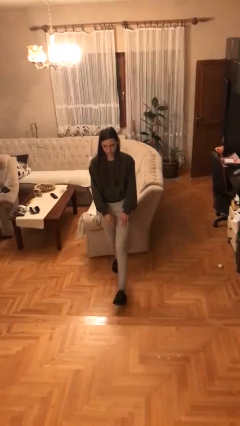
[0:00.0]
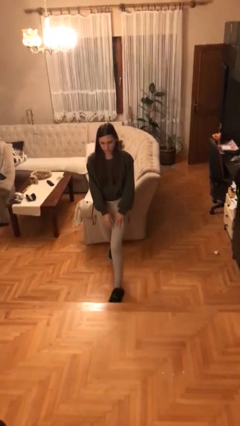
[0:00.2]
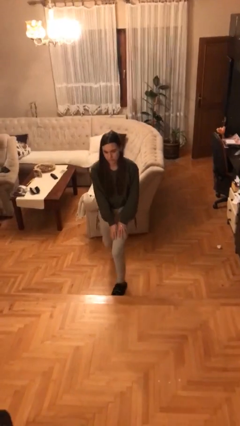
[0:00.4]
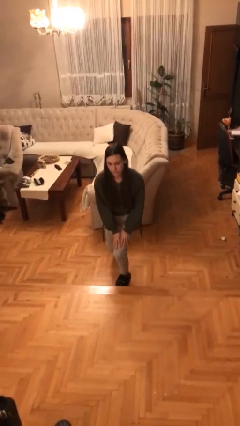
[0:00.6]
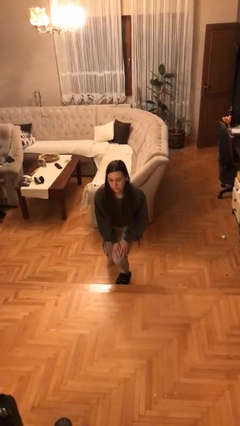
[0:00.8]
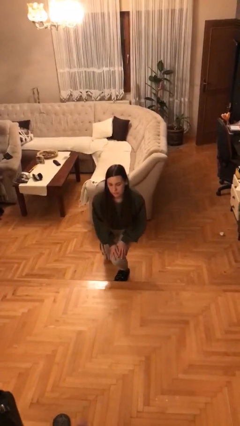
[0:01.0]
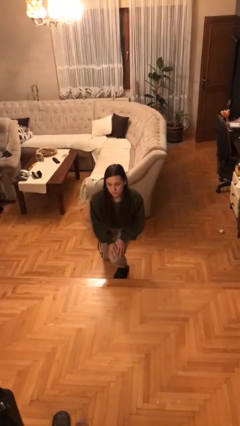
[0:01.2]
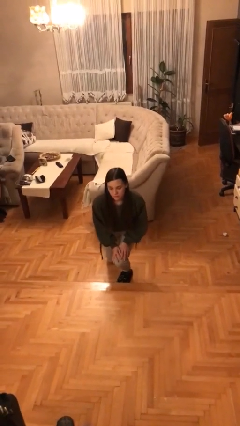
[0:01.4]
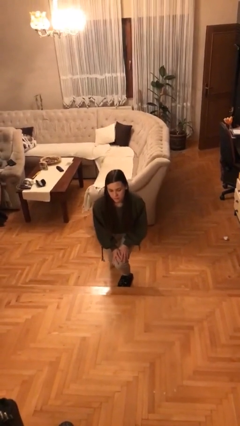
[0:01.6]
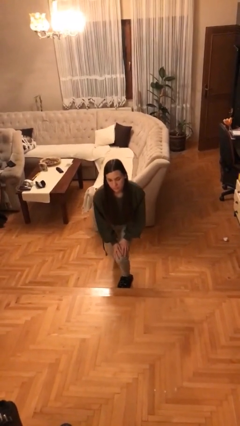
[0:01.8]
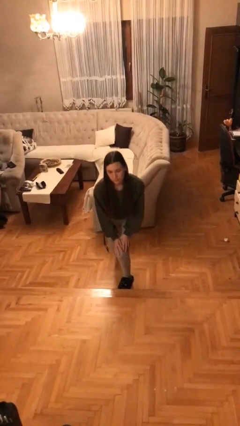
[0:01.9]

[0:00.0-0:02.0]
person kneels

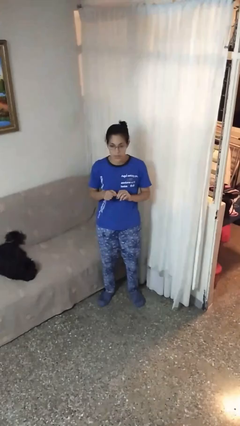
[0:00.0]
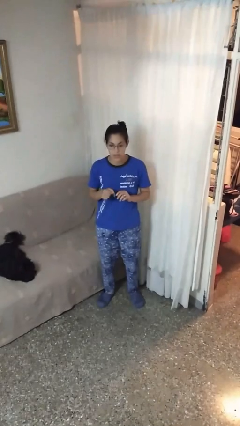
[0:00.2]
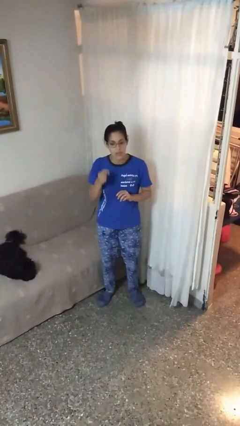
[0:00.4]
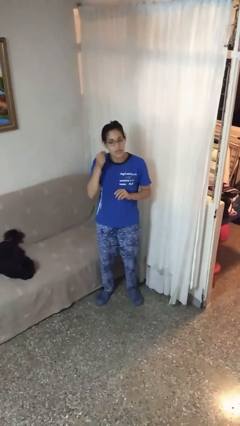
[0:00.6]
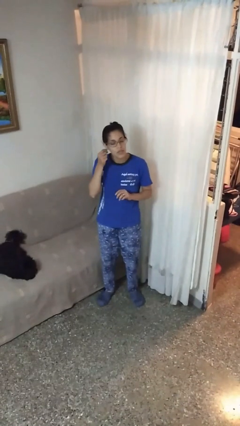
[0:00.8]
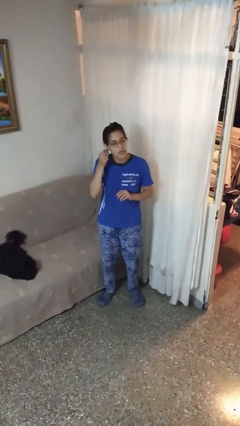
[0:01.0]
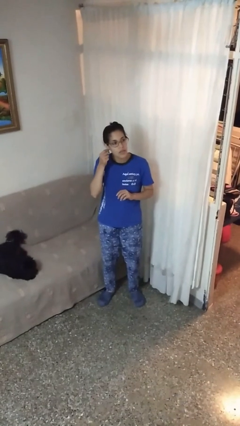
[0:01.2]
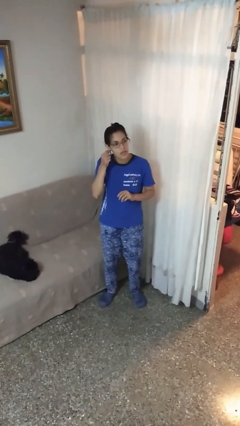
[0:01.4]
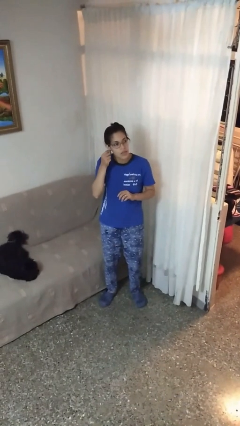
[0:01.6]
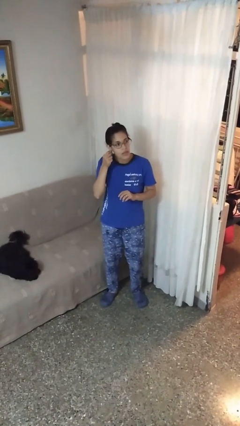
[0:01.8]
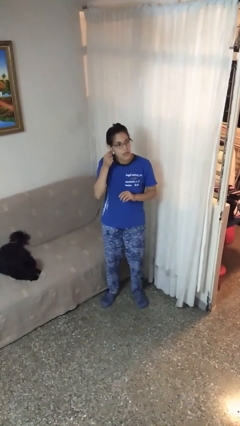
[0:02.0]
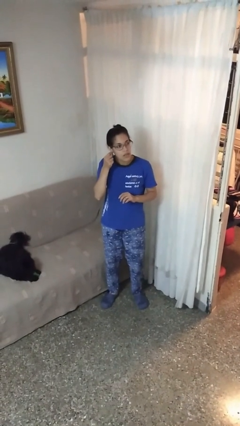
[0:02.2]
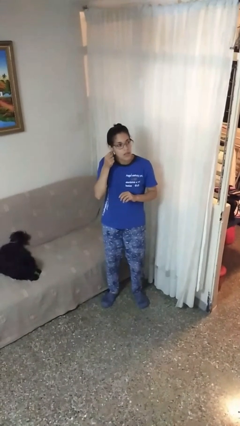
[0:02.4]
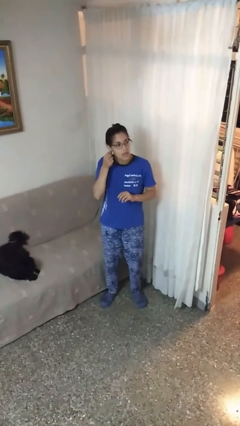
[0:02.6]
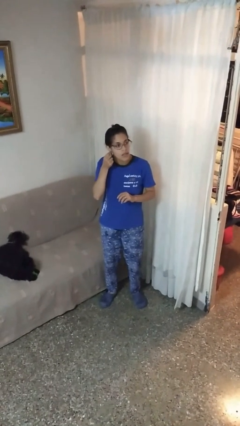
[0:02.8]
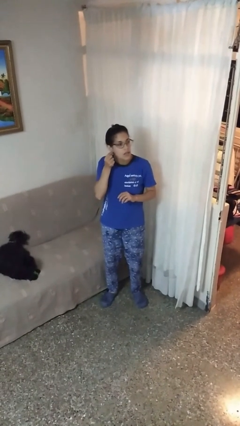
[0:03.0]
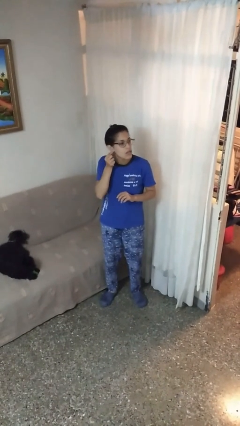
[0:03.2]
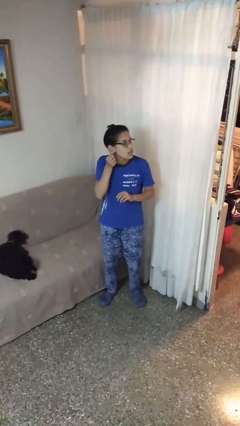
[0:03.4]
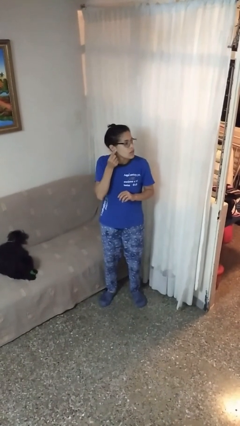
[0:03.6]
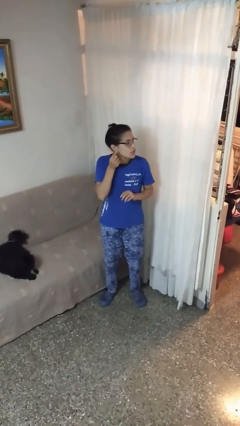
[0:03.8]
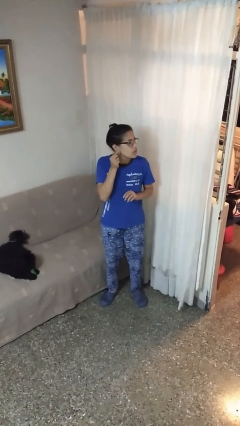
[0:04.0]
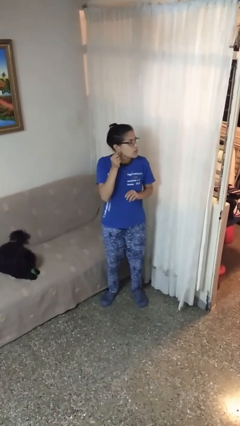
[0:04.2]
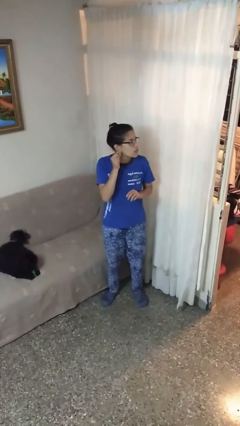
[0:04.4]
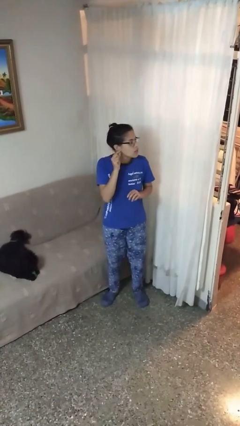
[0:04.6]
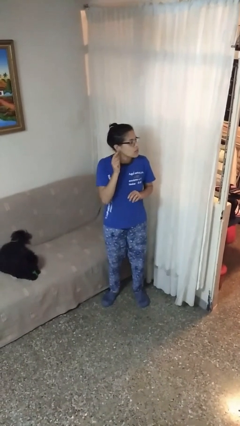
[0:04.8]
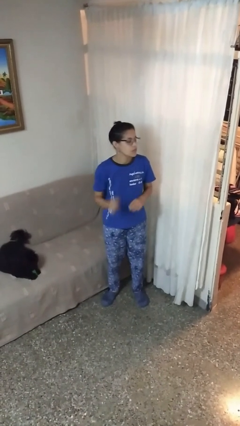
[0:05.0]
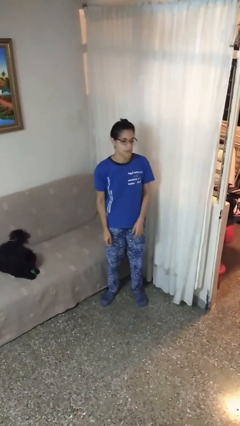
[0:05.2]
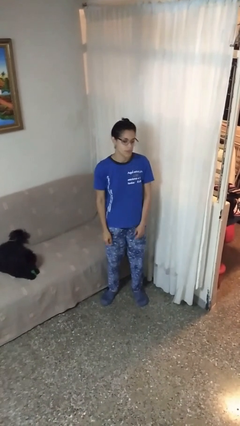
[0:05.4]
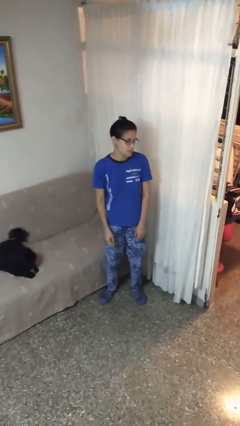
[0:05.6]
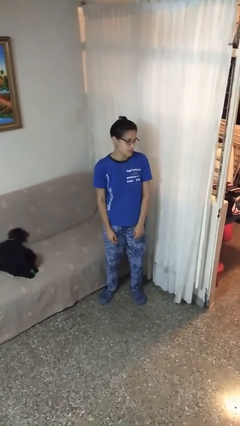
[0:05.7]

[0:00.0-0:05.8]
person puts on earrings

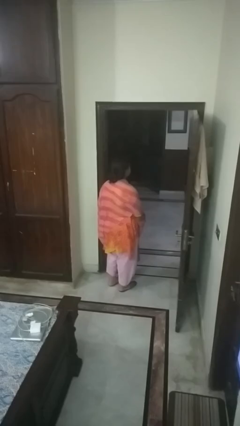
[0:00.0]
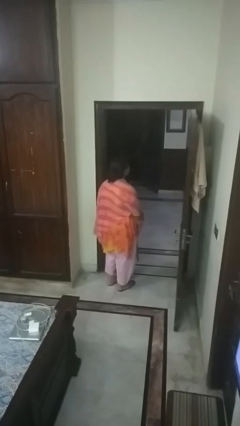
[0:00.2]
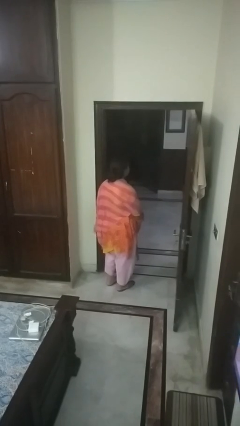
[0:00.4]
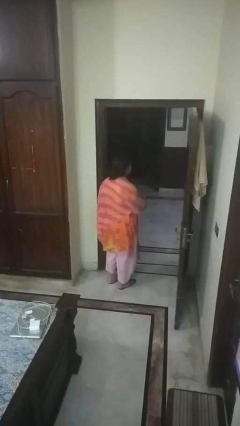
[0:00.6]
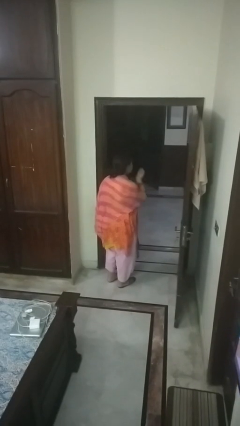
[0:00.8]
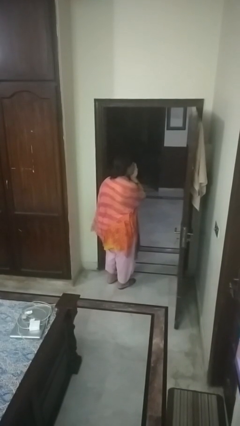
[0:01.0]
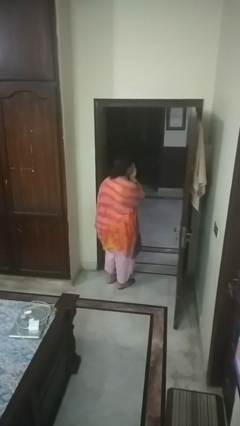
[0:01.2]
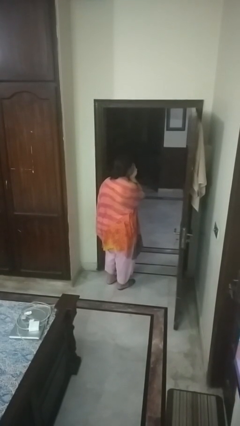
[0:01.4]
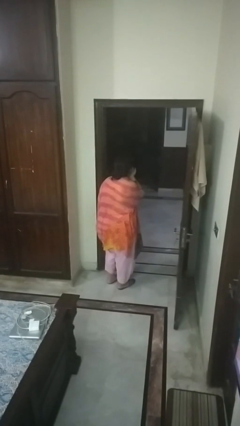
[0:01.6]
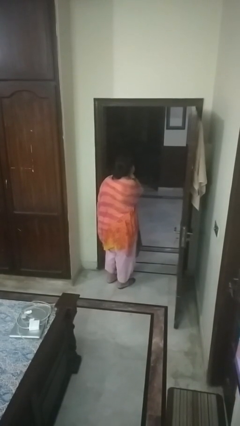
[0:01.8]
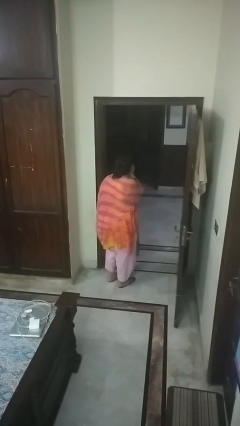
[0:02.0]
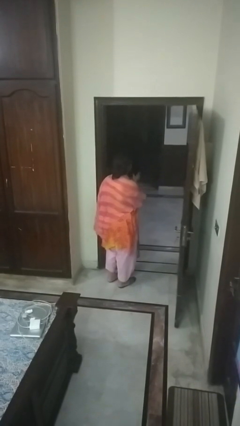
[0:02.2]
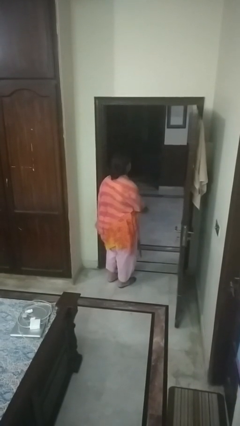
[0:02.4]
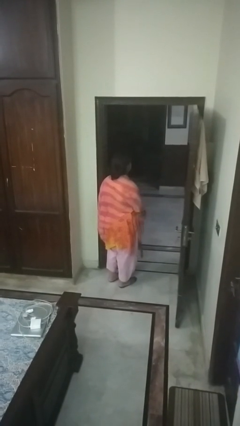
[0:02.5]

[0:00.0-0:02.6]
person gestures blow kiss

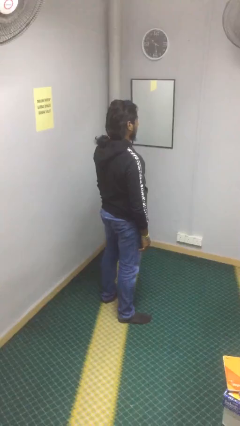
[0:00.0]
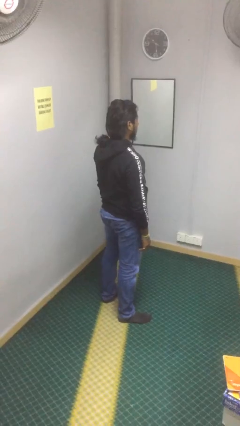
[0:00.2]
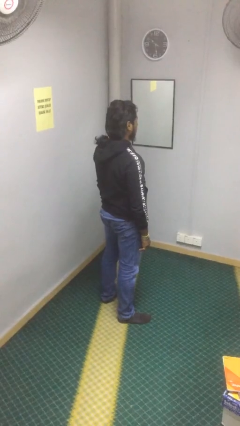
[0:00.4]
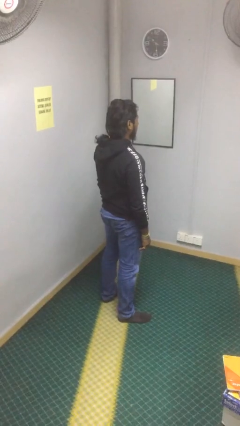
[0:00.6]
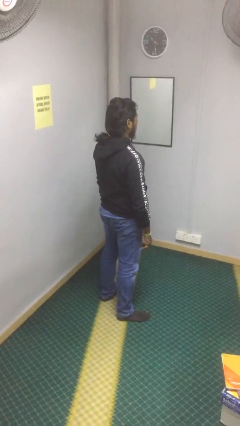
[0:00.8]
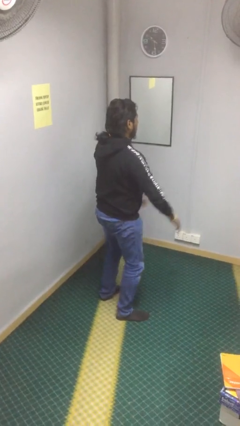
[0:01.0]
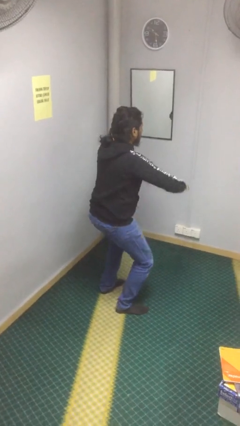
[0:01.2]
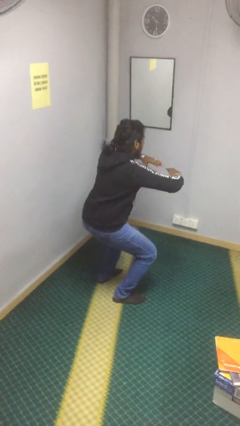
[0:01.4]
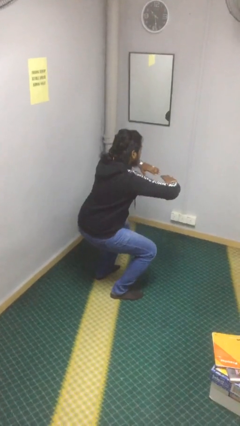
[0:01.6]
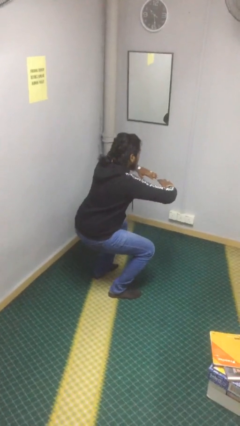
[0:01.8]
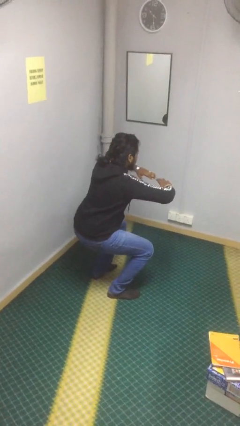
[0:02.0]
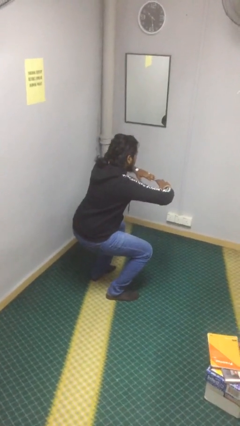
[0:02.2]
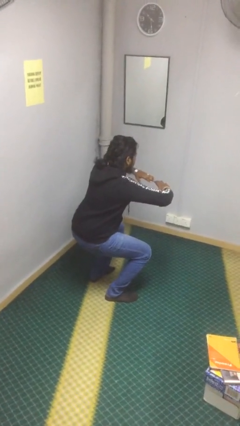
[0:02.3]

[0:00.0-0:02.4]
person squats

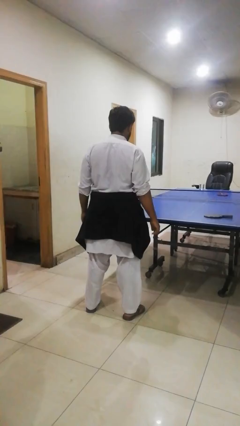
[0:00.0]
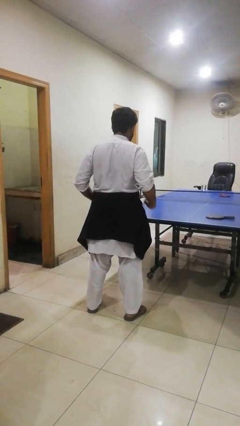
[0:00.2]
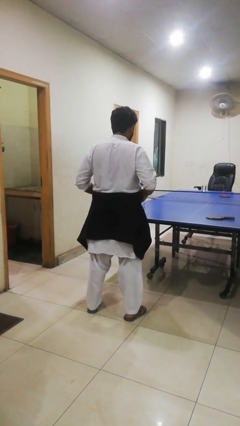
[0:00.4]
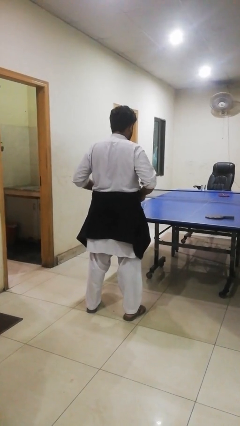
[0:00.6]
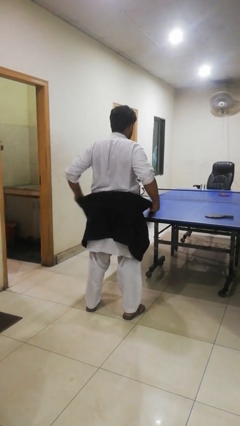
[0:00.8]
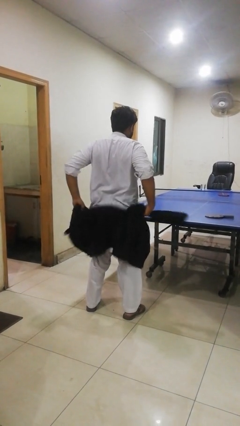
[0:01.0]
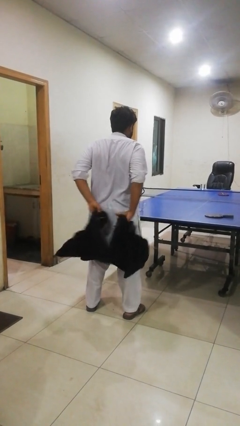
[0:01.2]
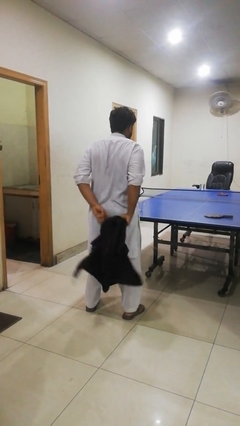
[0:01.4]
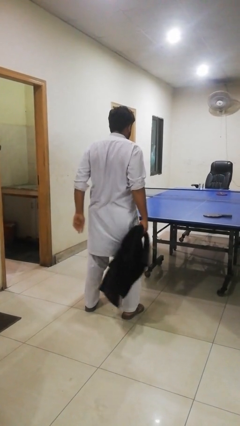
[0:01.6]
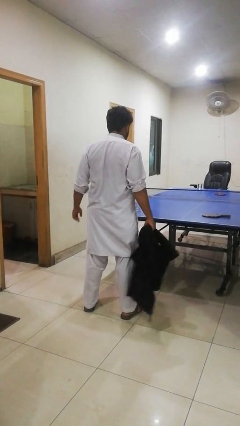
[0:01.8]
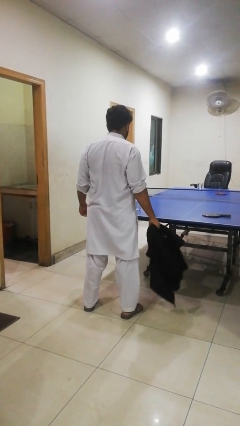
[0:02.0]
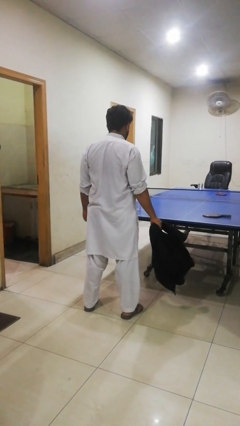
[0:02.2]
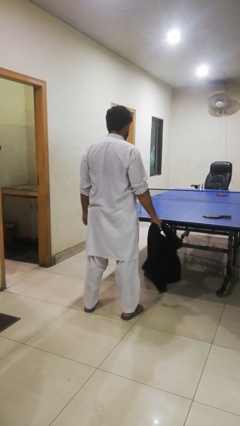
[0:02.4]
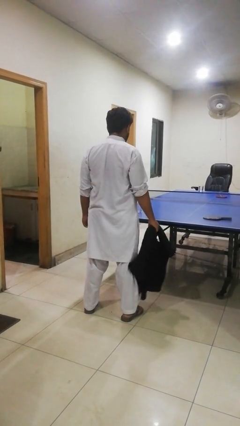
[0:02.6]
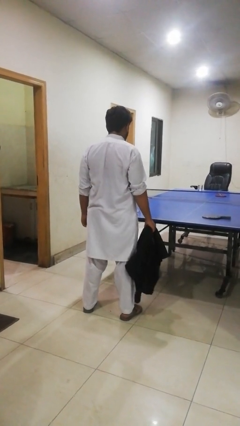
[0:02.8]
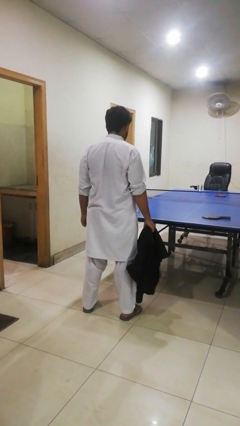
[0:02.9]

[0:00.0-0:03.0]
person unties jacket around waist

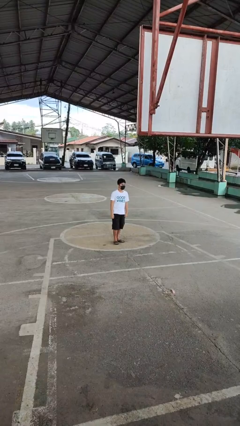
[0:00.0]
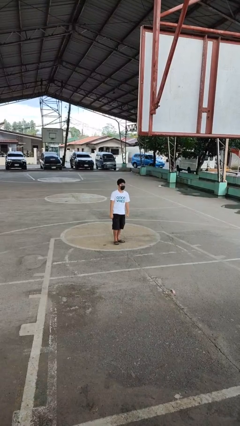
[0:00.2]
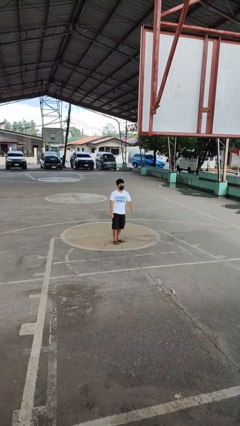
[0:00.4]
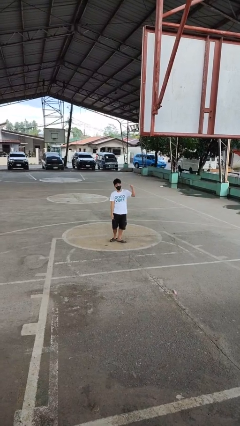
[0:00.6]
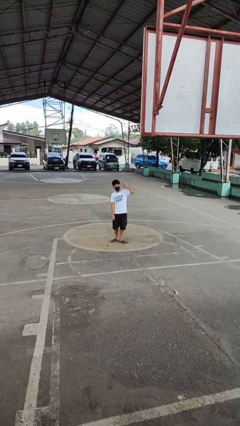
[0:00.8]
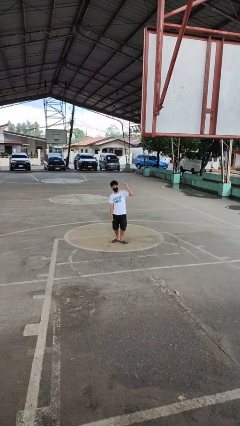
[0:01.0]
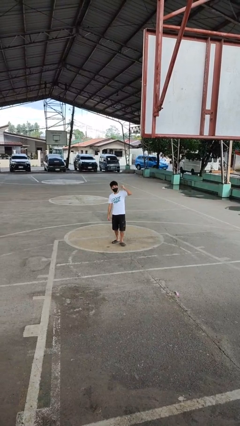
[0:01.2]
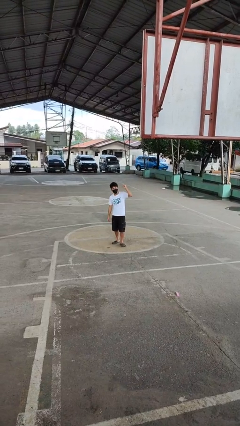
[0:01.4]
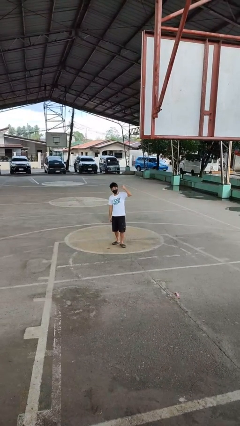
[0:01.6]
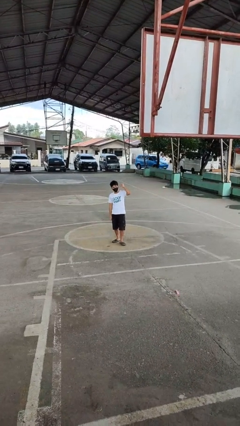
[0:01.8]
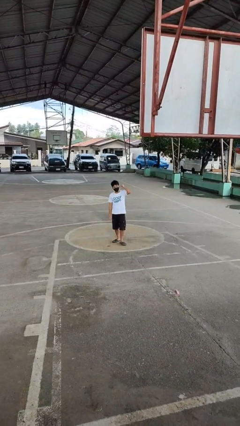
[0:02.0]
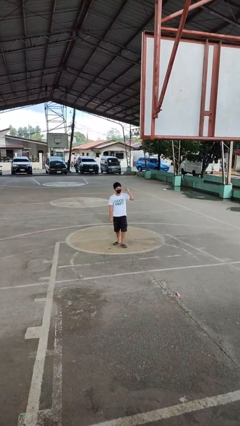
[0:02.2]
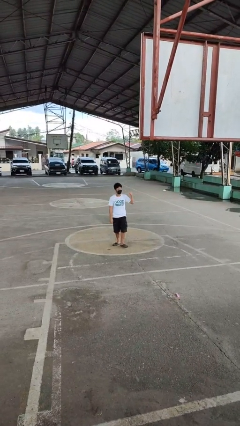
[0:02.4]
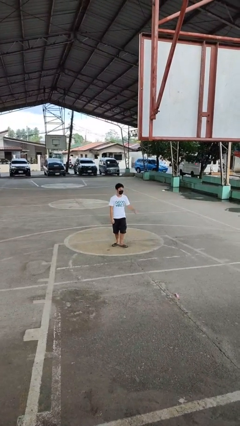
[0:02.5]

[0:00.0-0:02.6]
person gestures behind me
